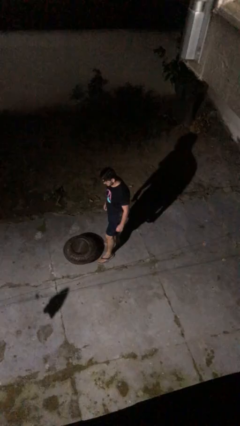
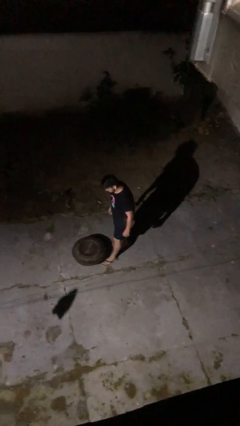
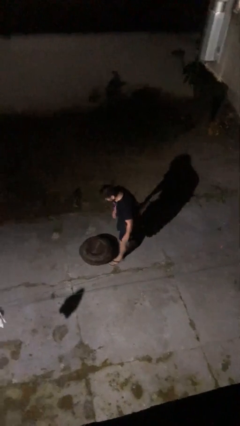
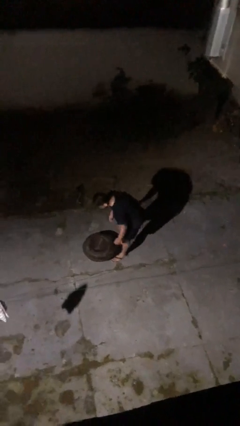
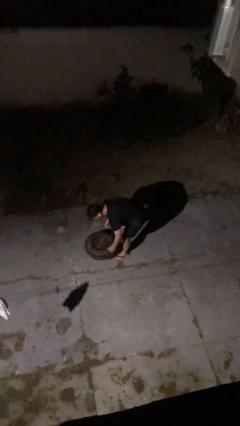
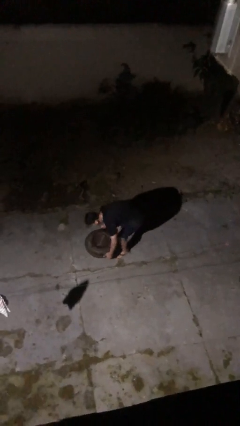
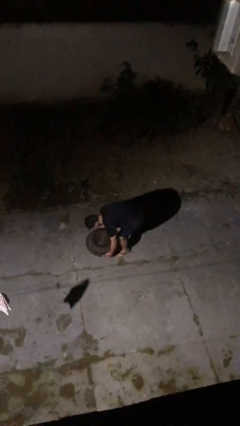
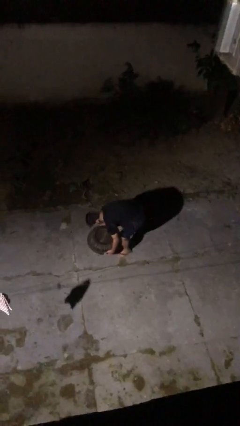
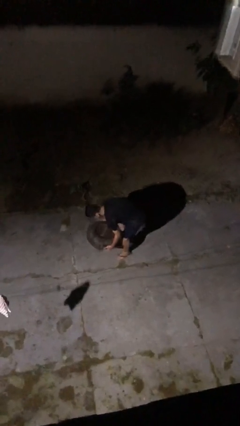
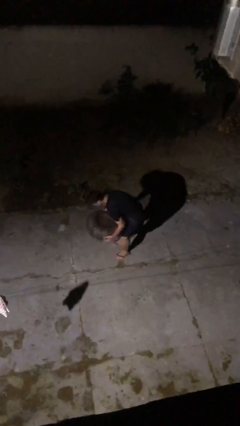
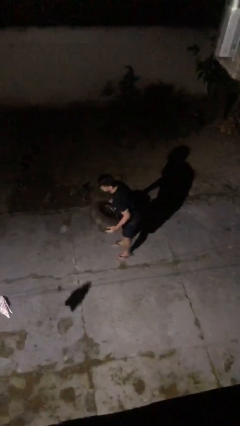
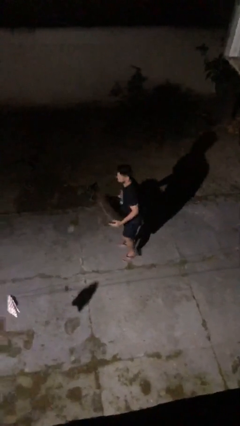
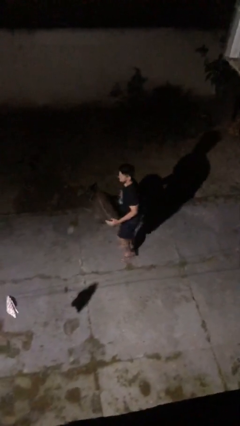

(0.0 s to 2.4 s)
person picks up object from floor

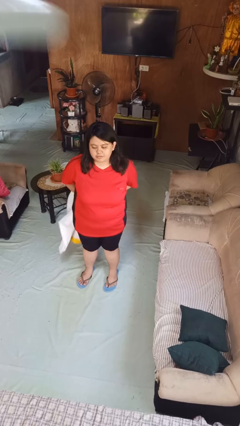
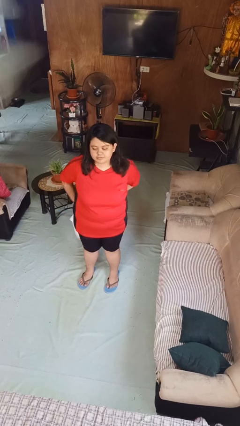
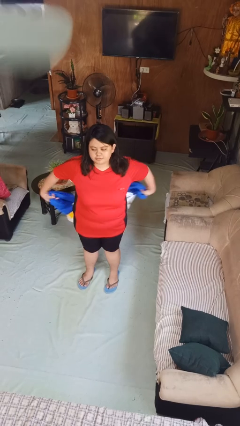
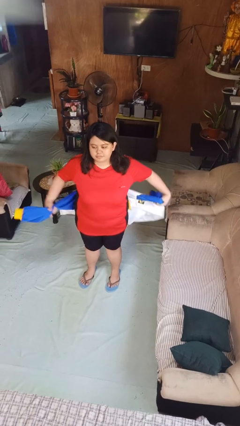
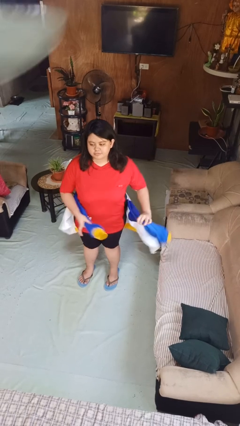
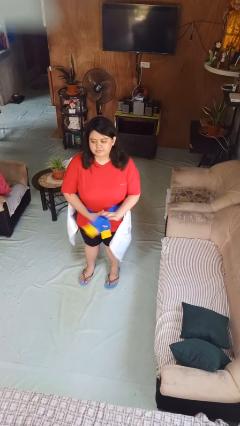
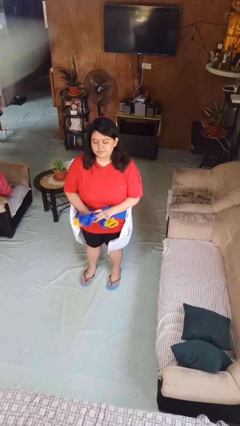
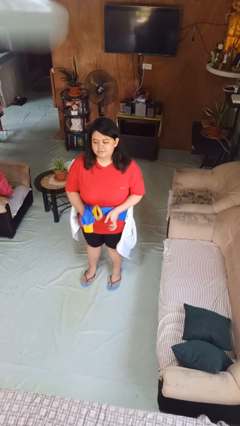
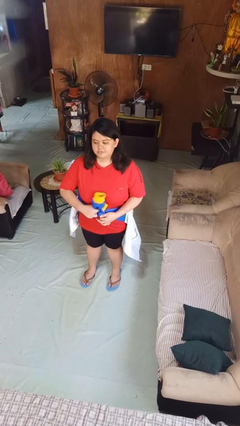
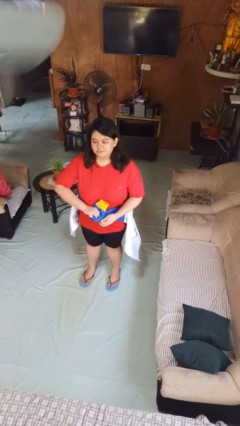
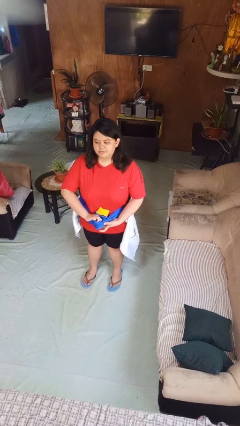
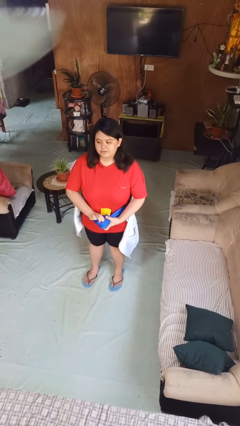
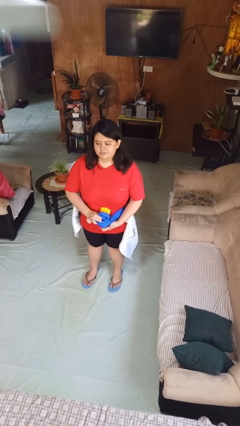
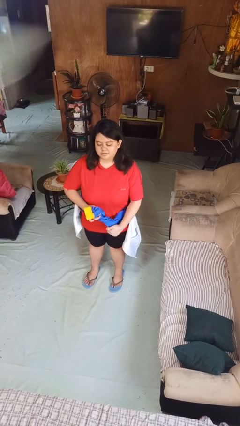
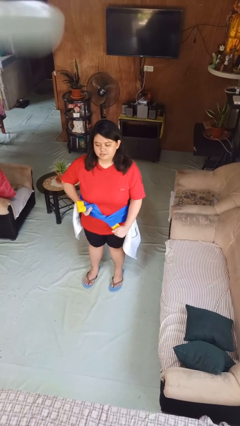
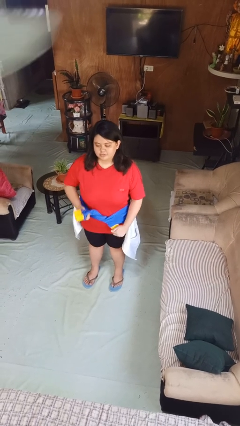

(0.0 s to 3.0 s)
person ties jacket around waist

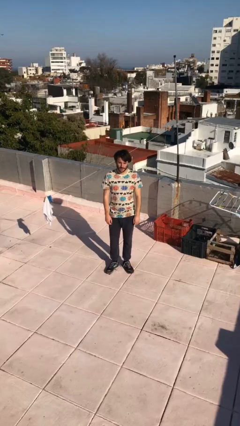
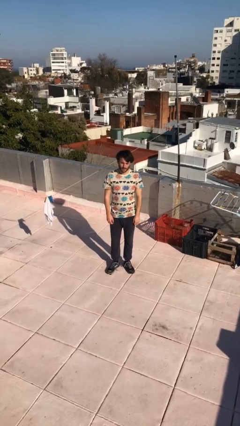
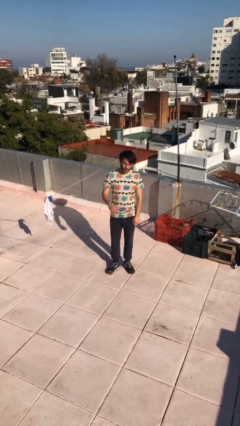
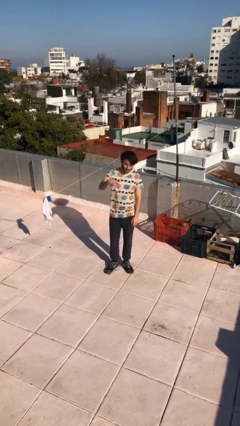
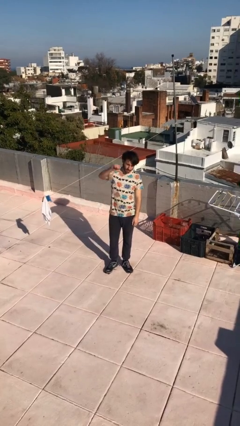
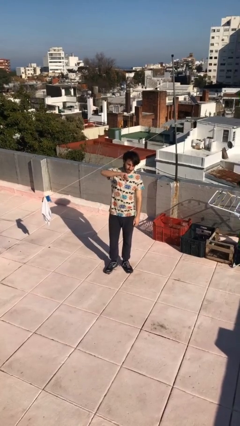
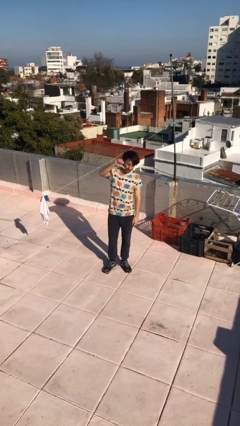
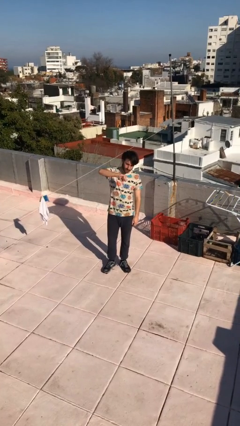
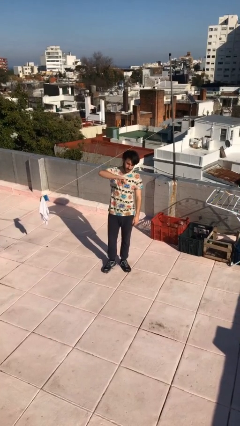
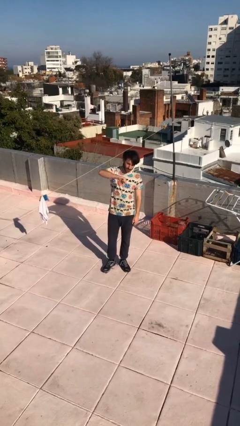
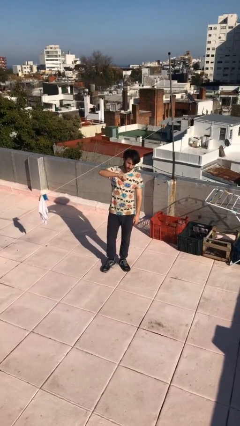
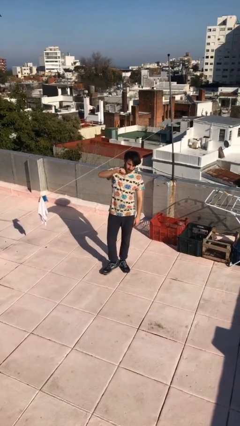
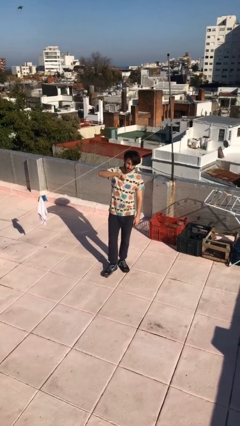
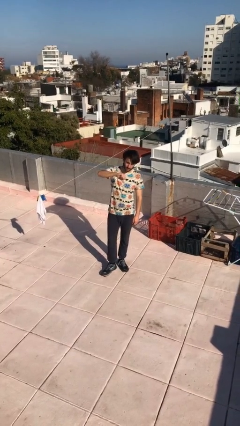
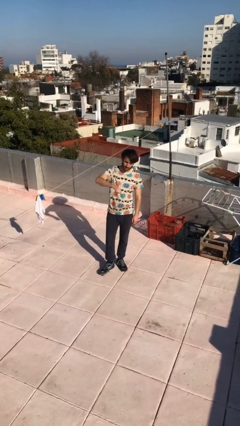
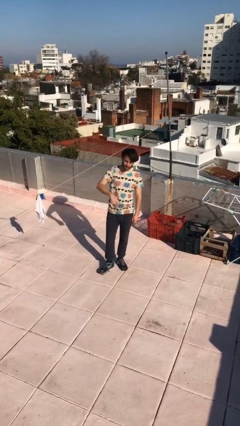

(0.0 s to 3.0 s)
person gestures thumbs down

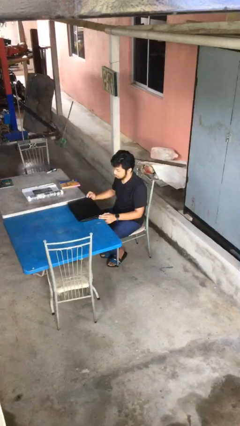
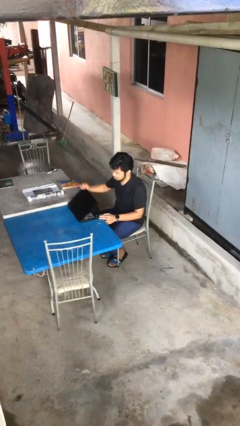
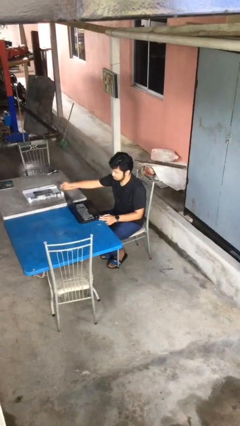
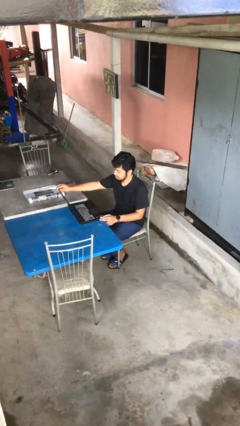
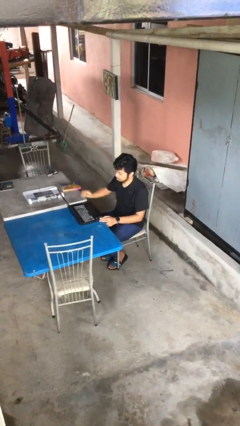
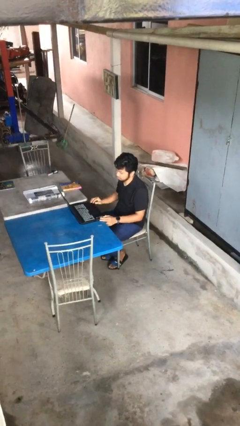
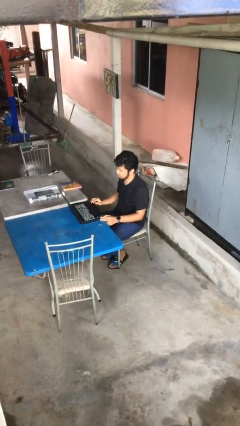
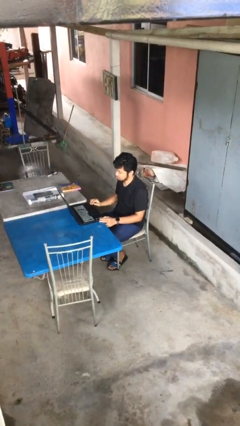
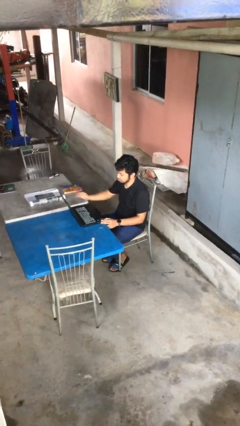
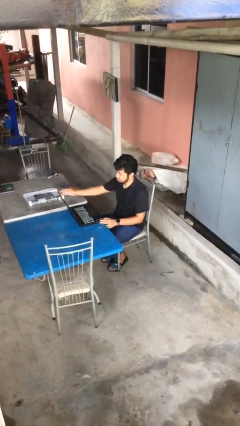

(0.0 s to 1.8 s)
person opens laptop

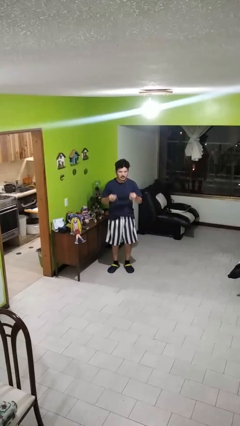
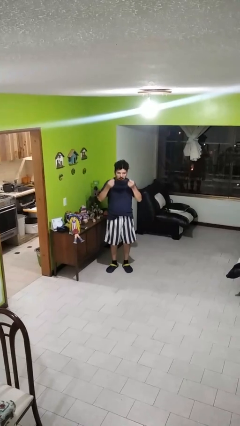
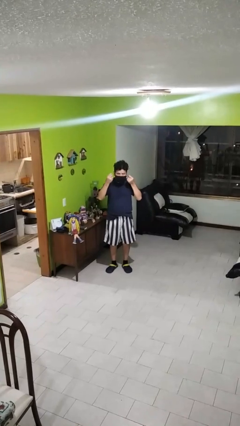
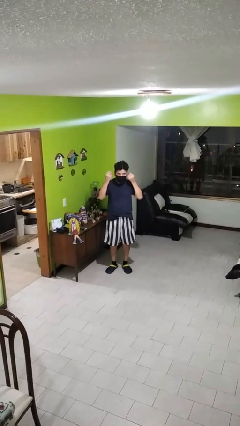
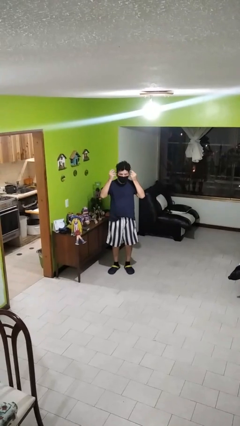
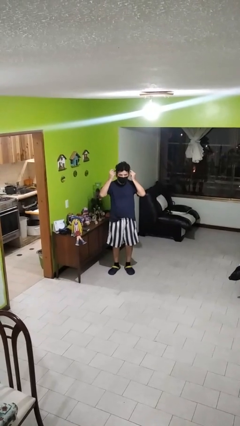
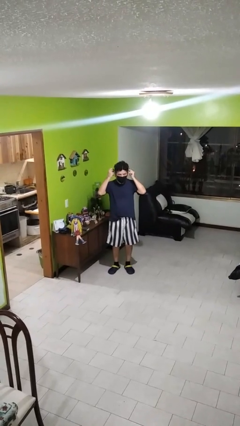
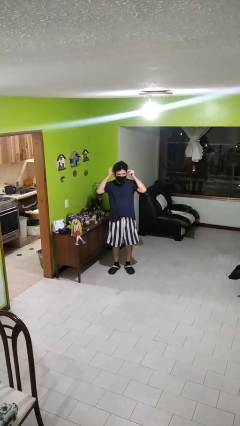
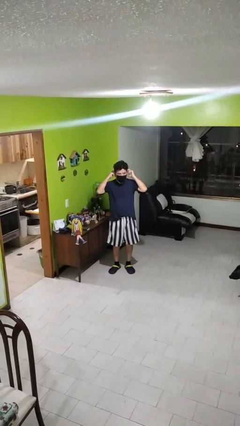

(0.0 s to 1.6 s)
person puts on facemask

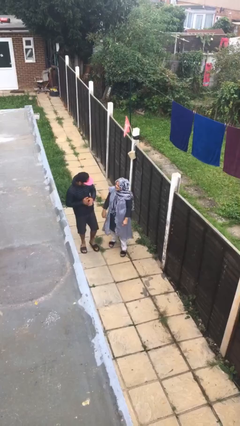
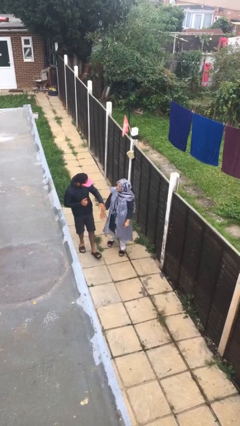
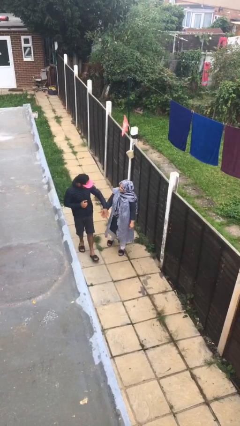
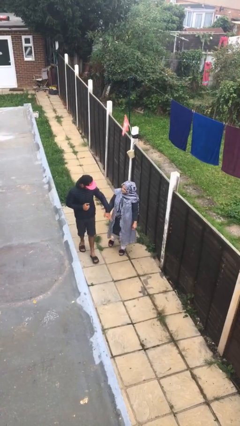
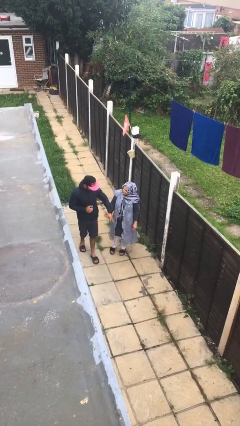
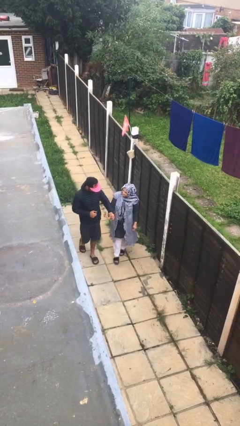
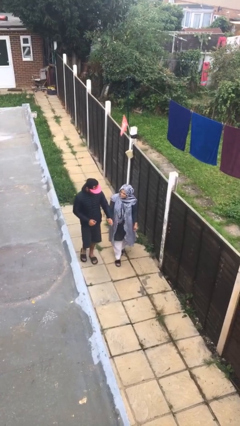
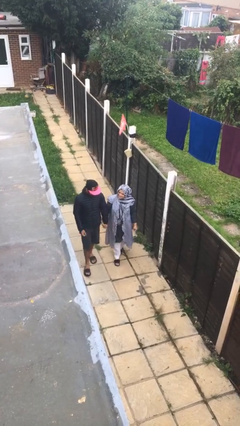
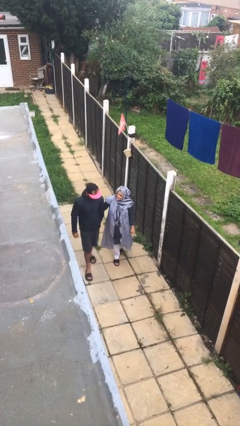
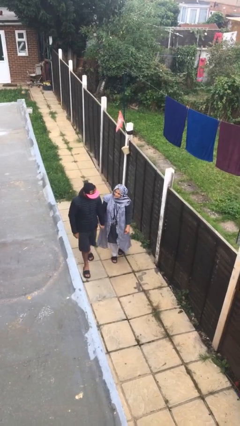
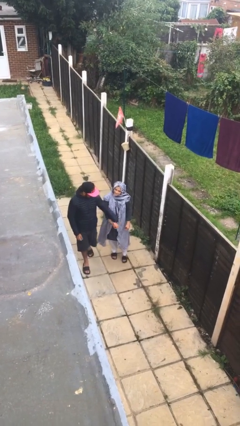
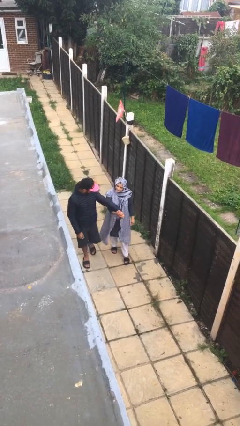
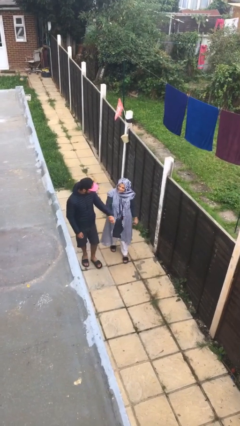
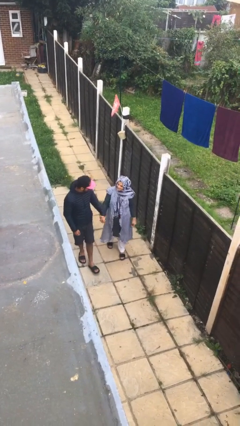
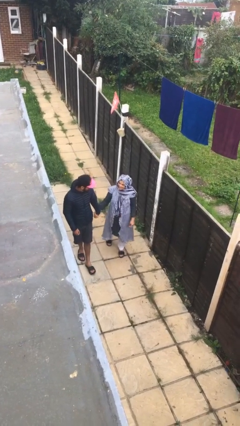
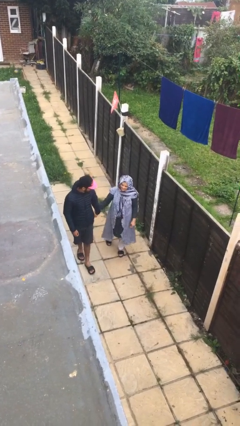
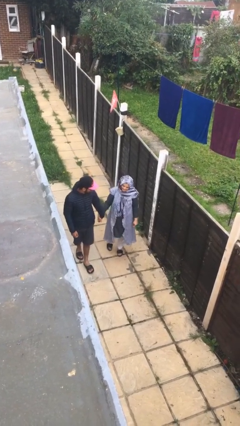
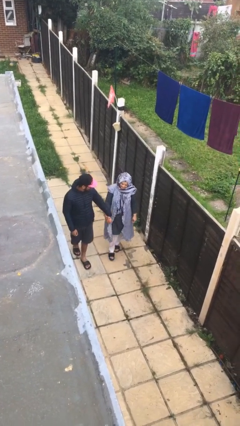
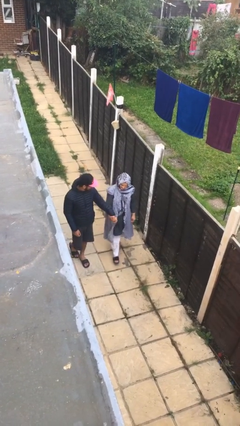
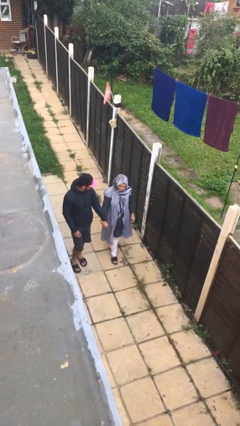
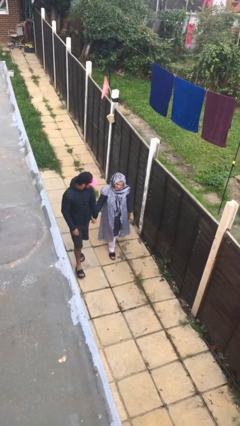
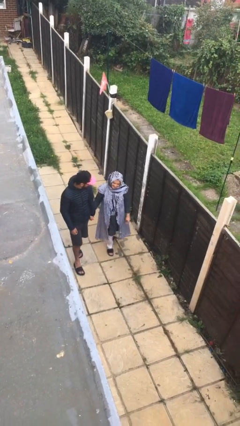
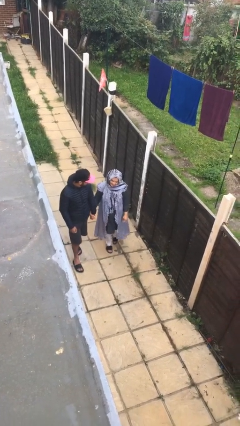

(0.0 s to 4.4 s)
person holds hand

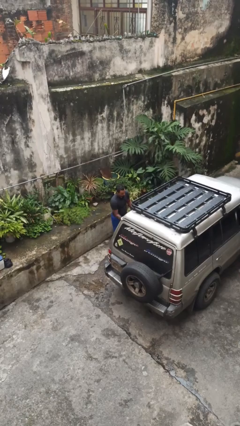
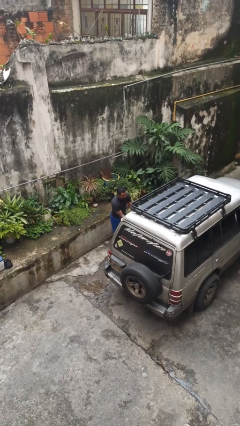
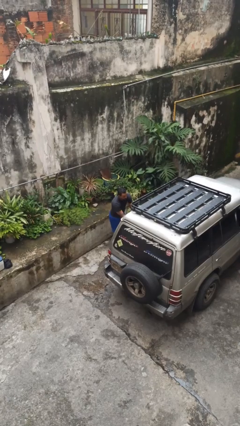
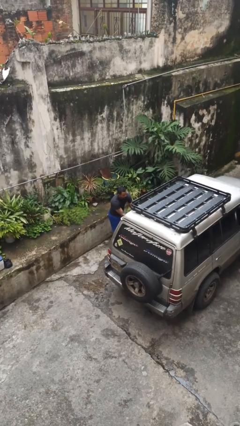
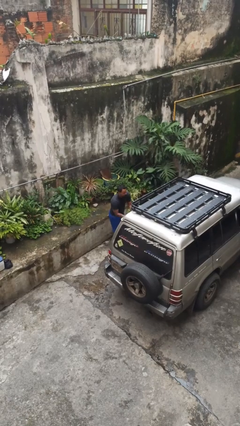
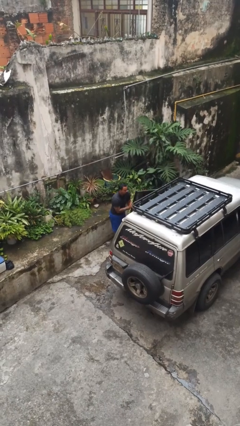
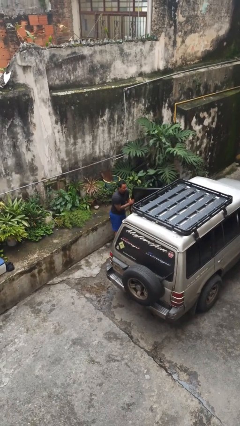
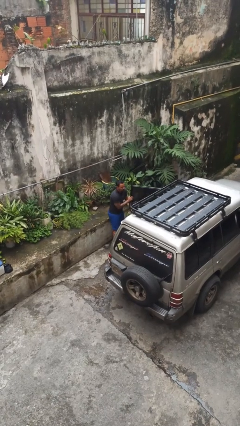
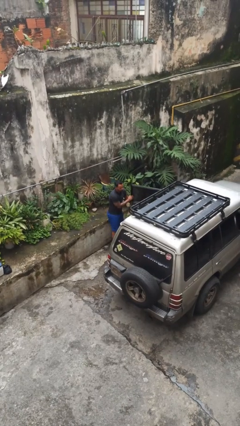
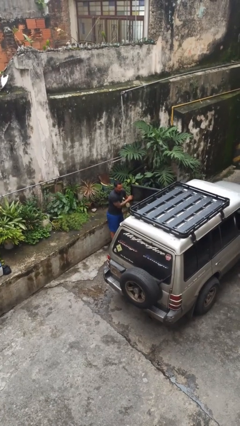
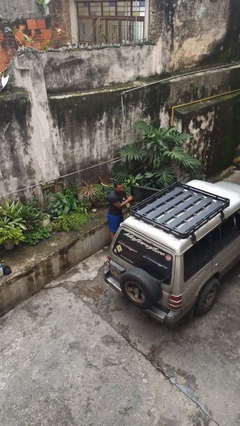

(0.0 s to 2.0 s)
person opens car door
